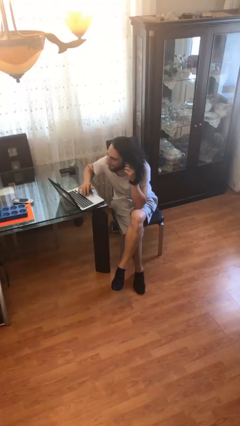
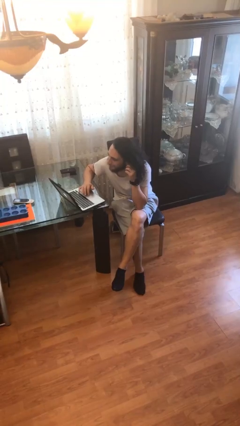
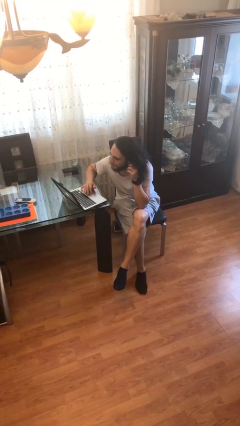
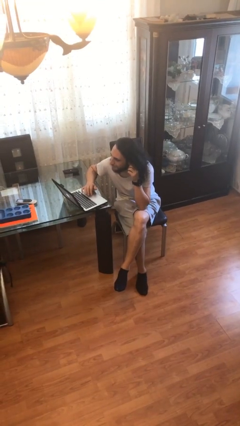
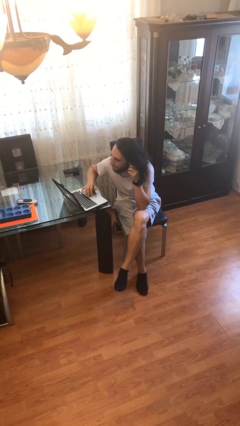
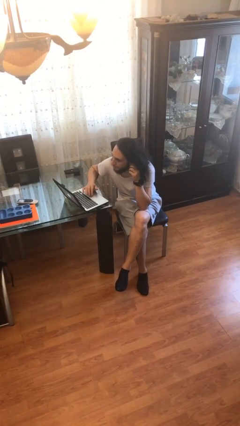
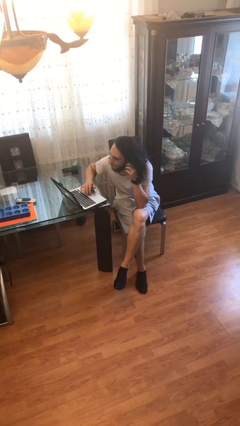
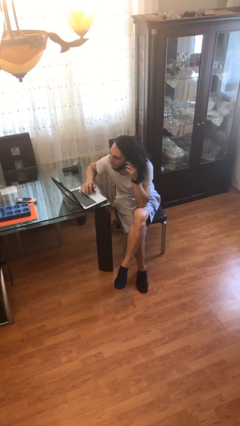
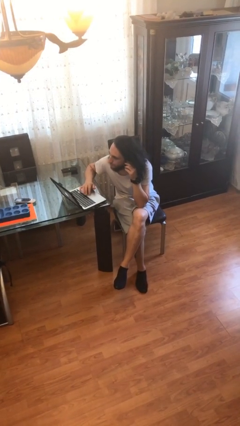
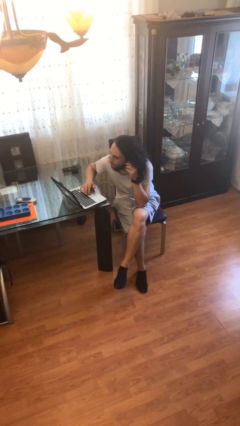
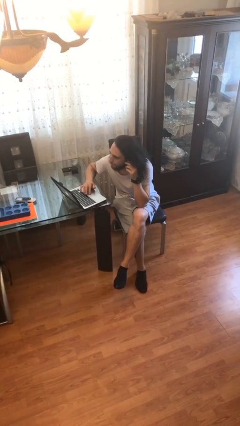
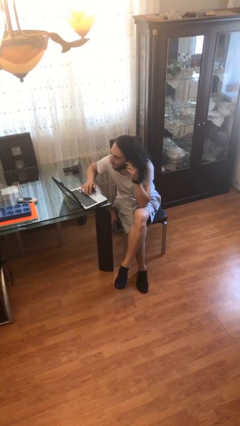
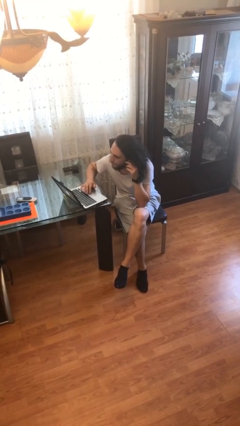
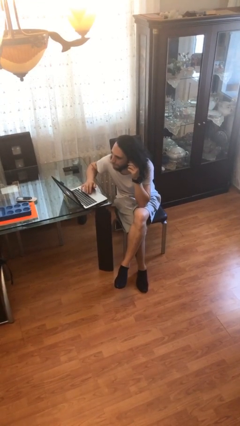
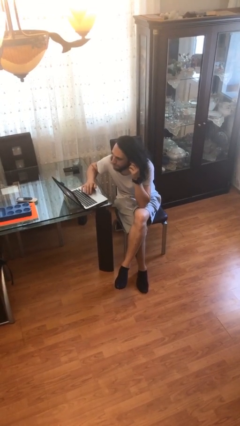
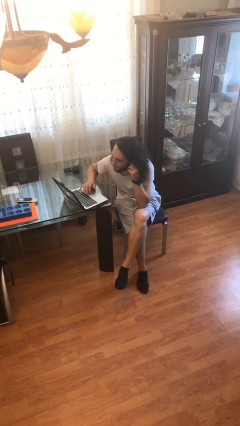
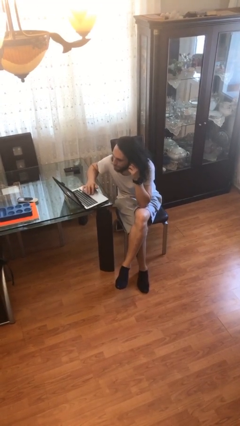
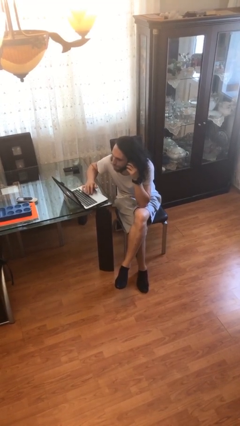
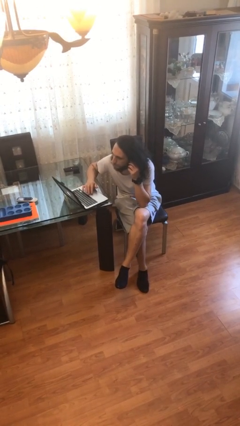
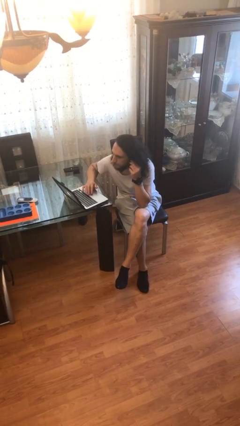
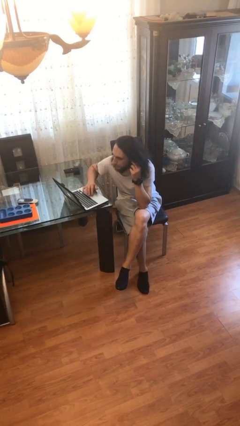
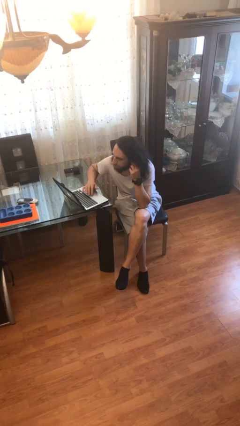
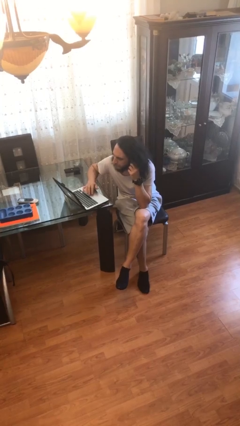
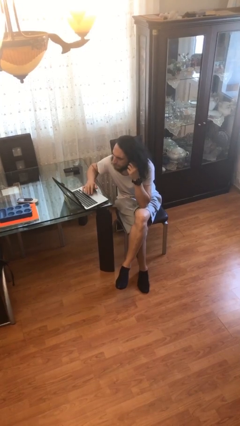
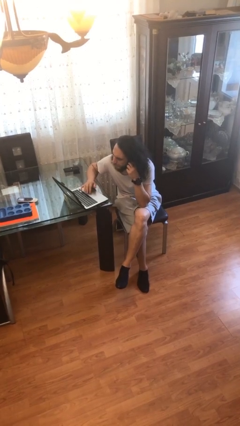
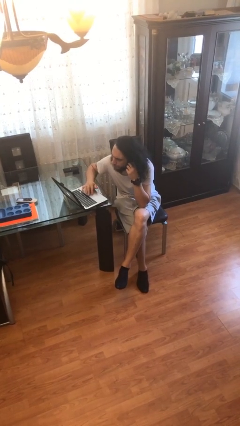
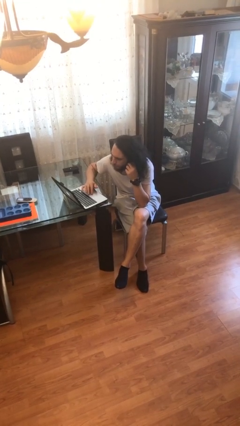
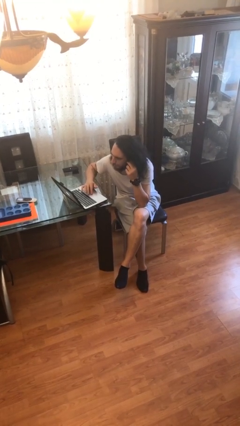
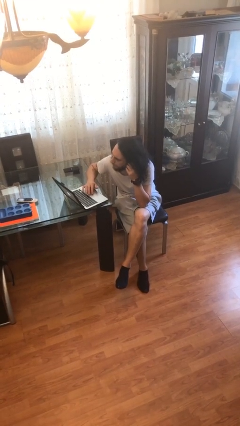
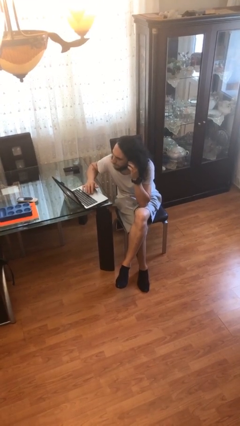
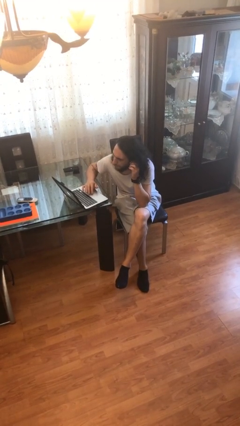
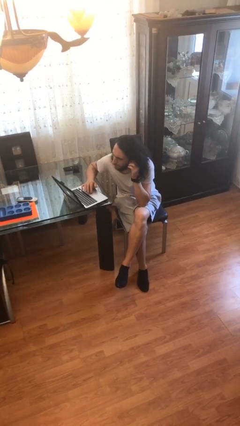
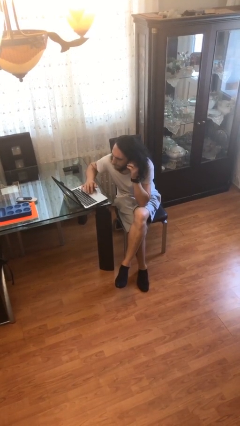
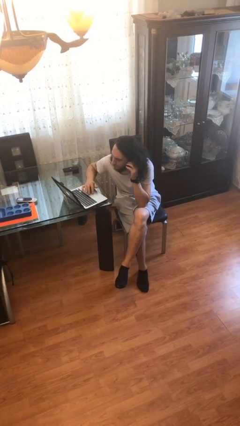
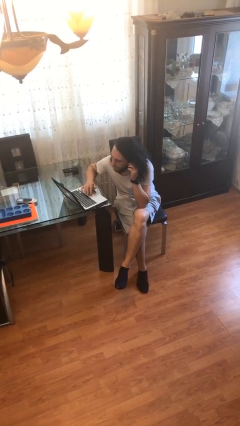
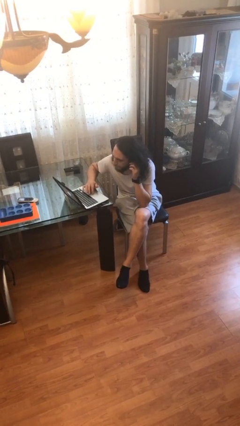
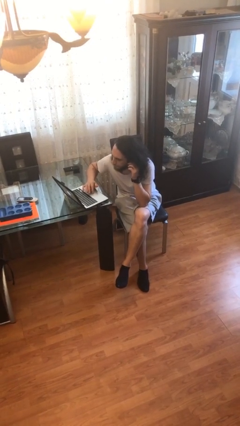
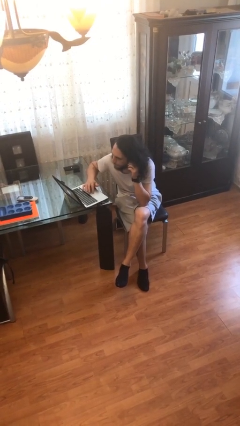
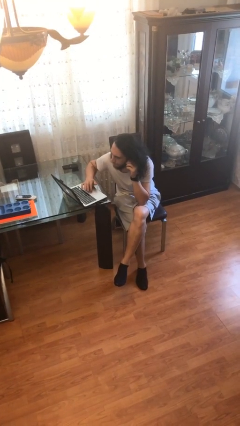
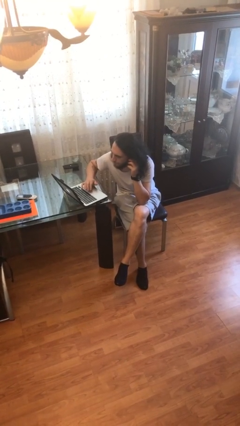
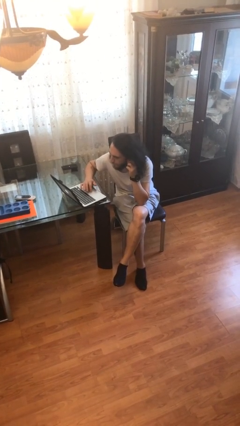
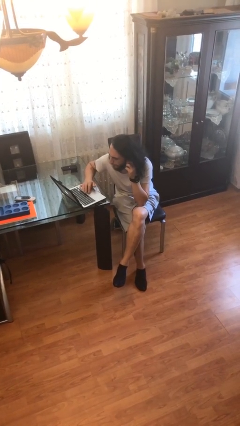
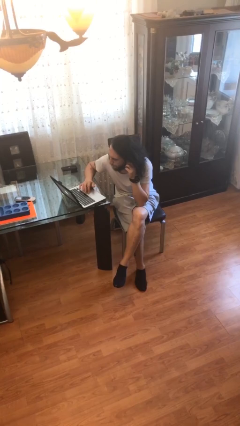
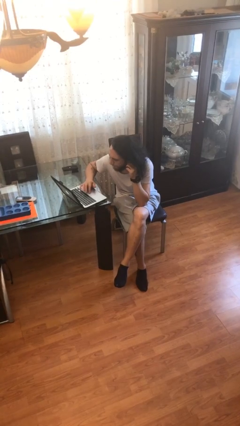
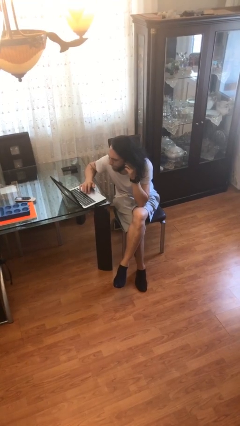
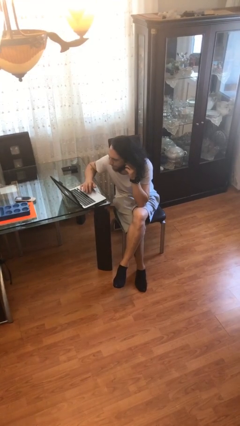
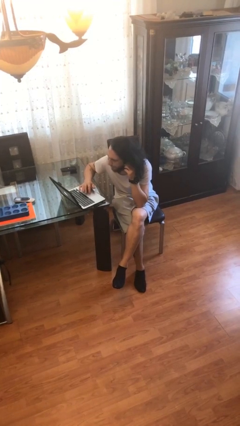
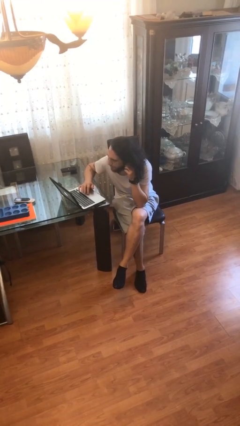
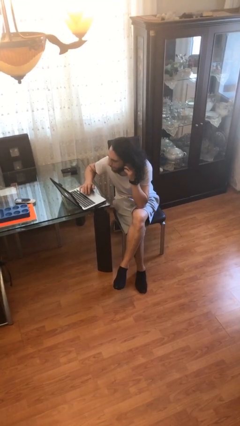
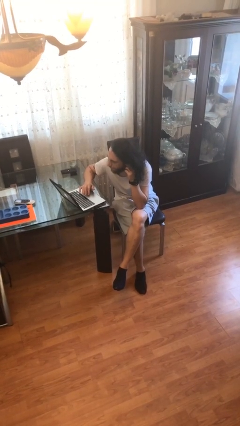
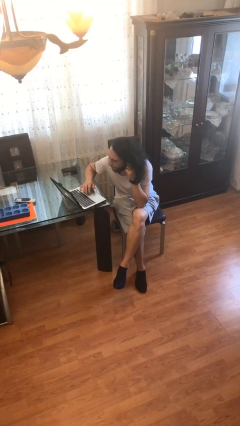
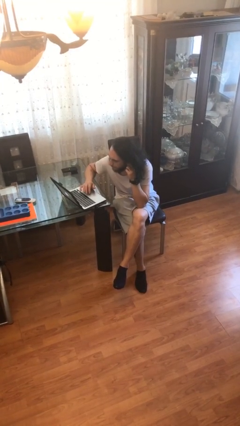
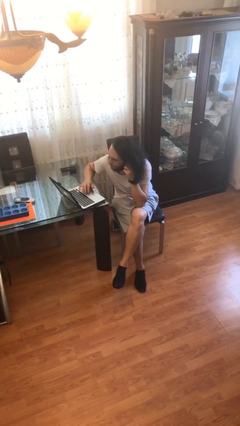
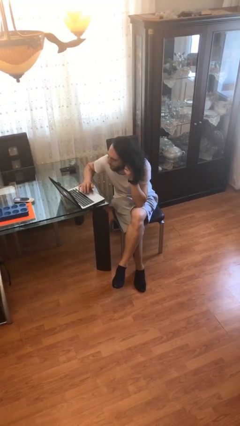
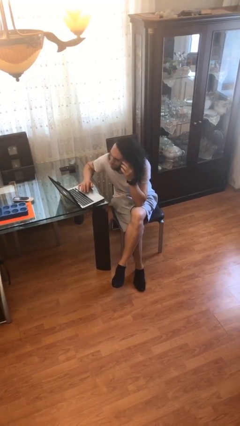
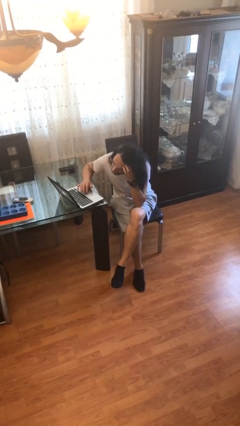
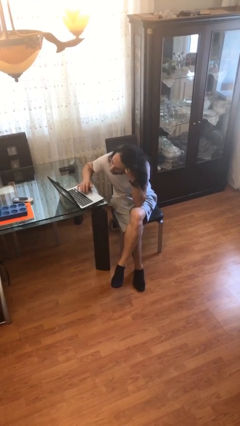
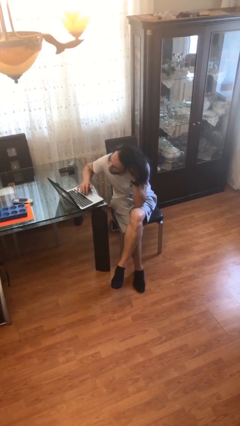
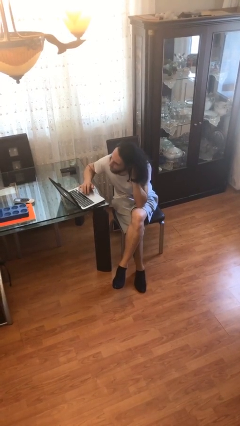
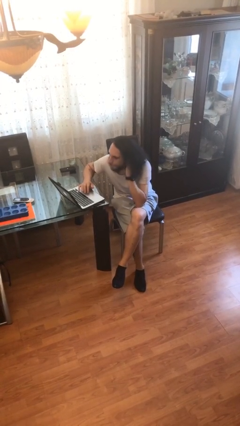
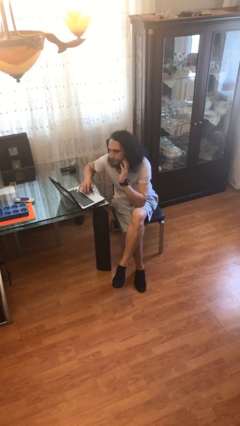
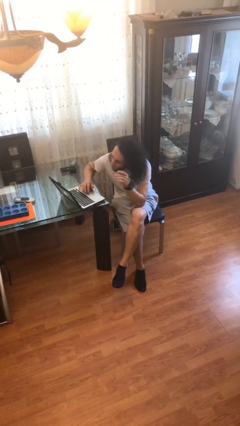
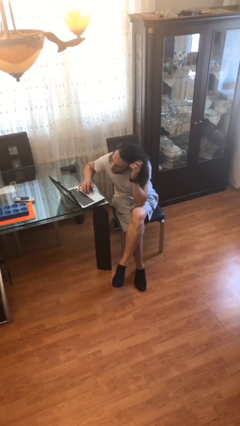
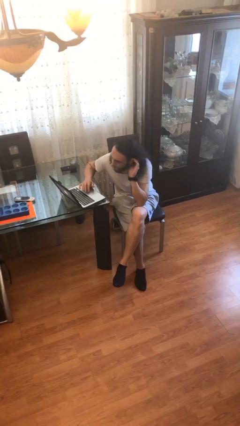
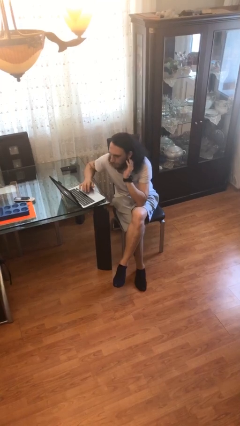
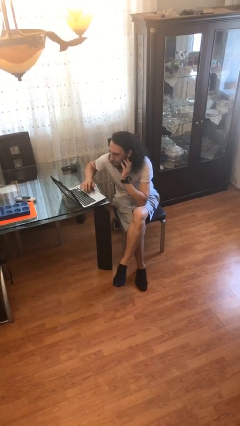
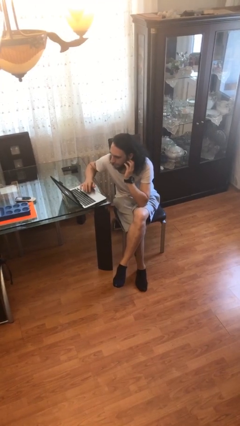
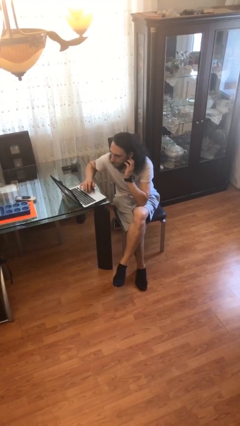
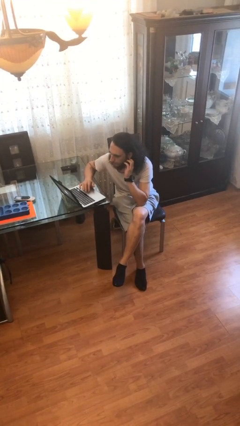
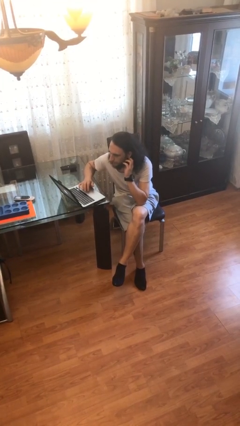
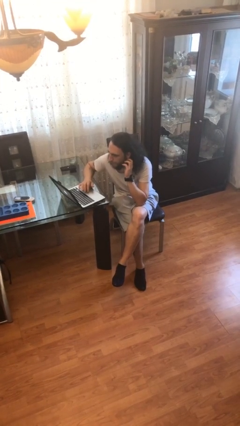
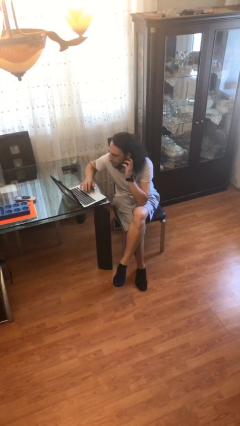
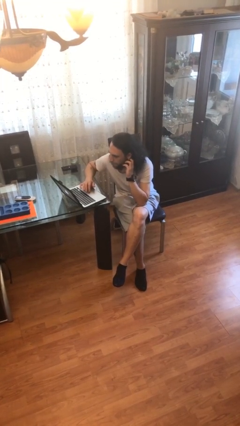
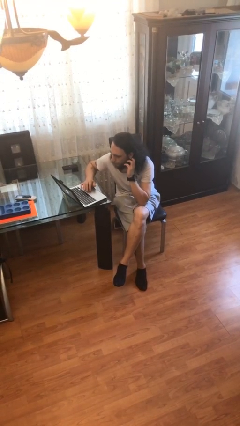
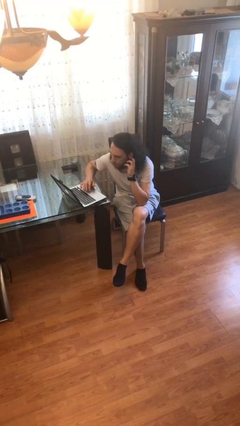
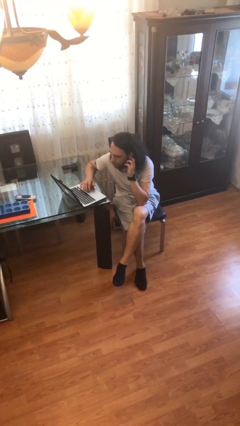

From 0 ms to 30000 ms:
person interacts with laptop

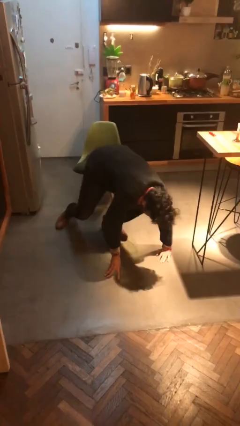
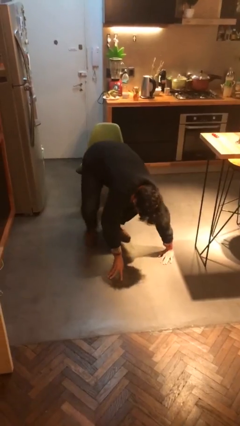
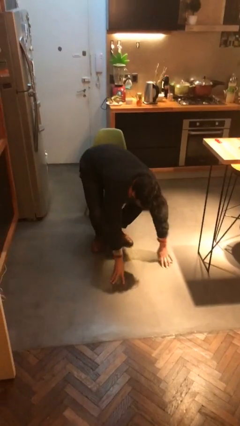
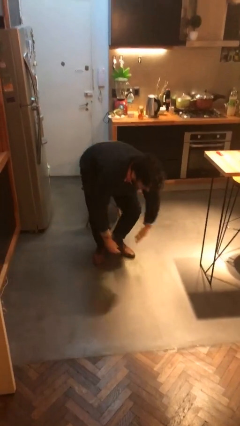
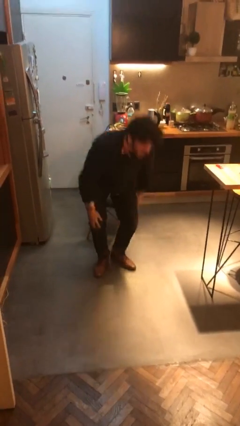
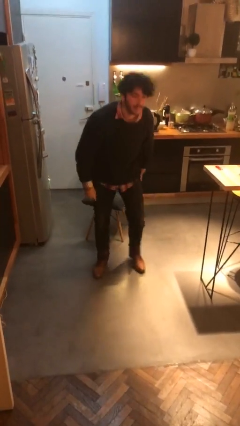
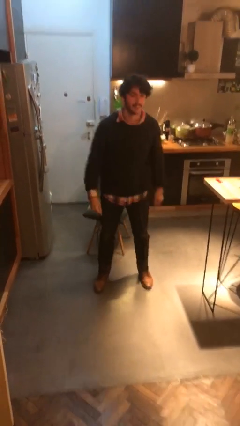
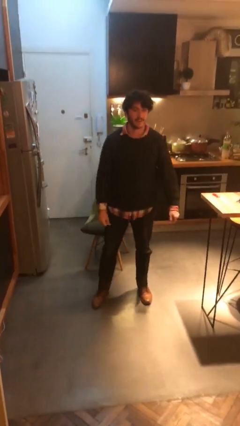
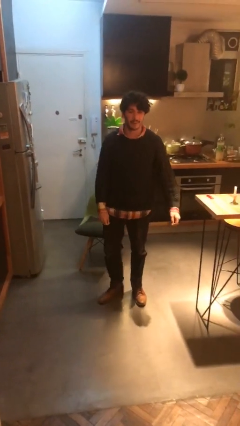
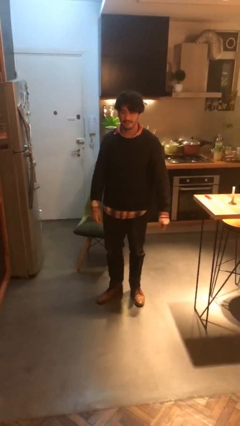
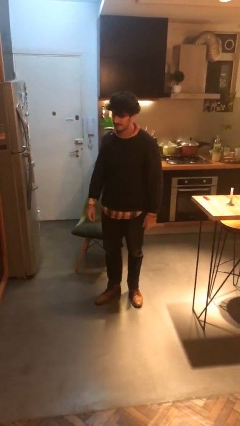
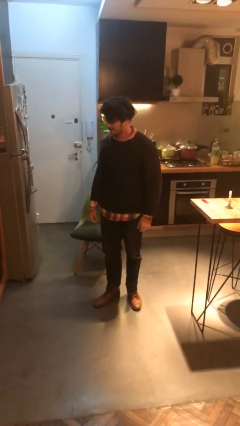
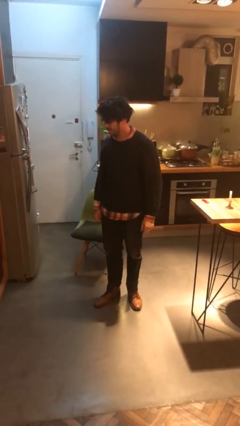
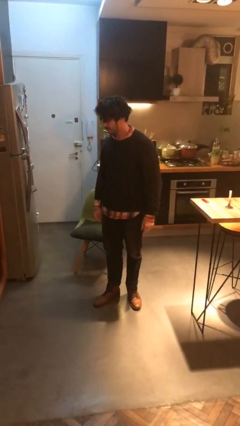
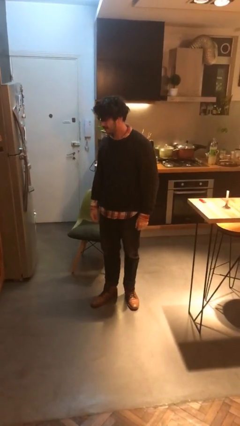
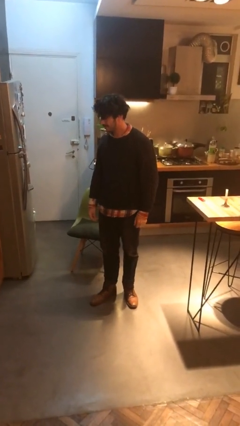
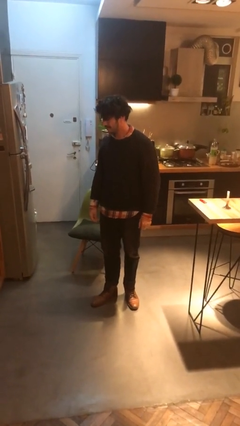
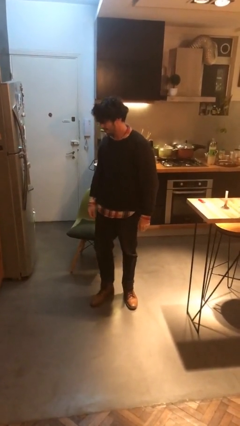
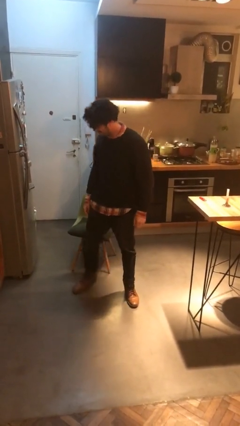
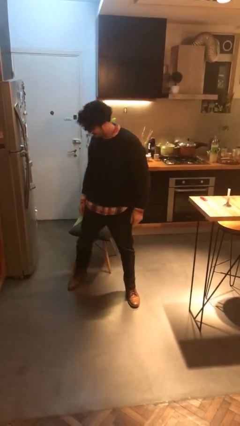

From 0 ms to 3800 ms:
person stands up from floor
